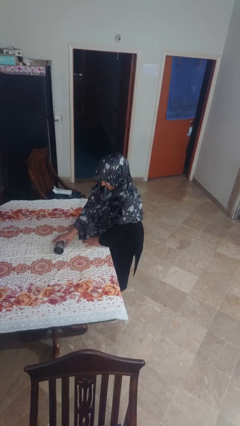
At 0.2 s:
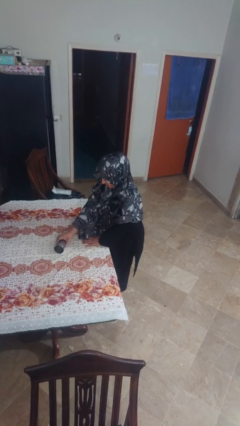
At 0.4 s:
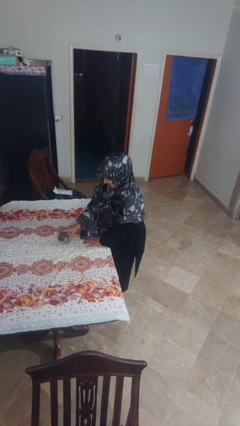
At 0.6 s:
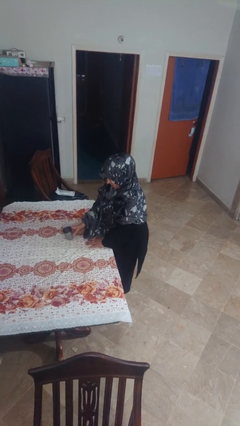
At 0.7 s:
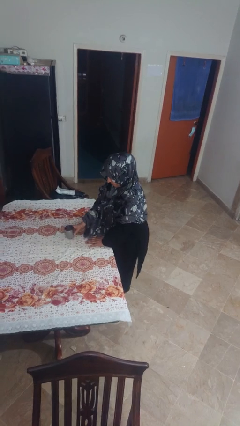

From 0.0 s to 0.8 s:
person sets upright glass

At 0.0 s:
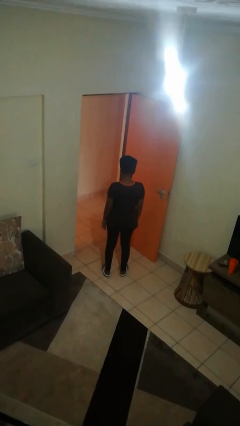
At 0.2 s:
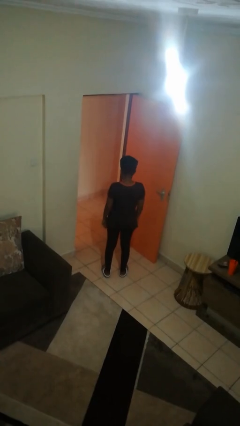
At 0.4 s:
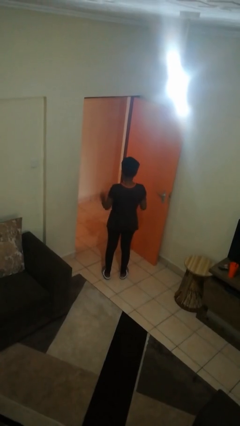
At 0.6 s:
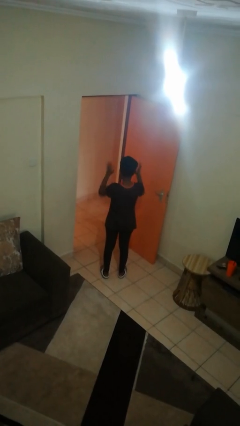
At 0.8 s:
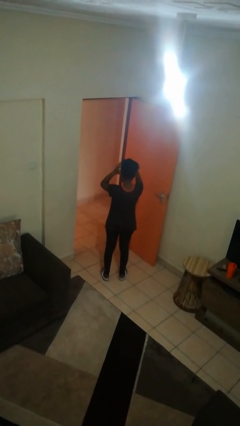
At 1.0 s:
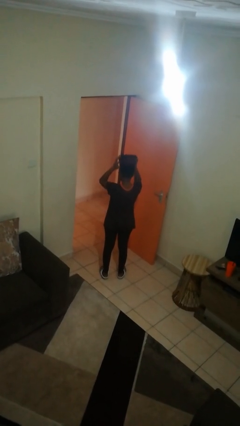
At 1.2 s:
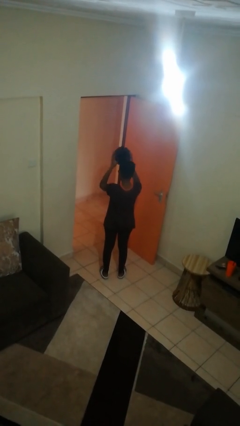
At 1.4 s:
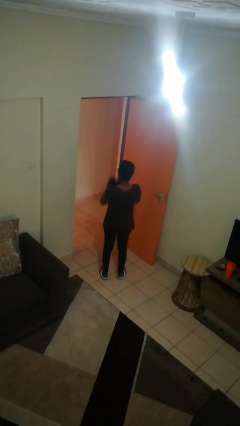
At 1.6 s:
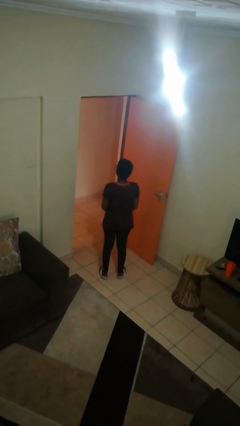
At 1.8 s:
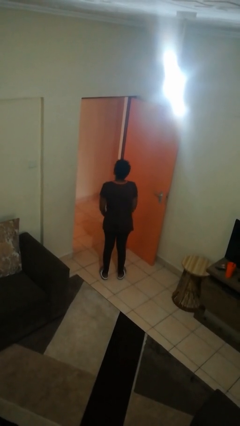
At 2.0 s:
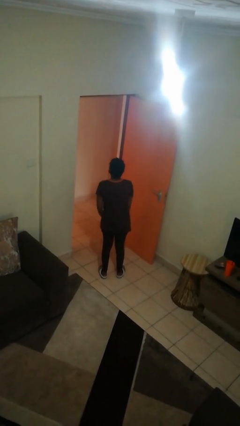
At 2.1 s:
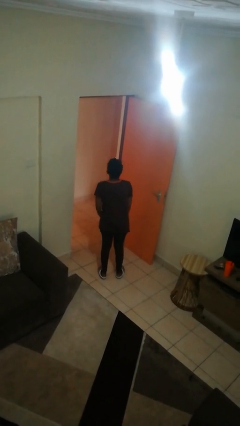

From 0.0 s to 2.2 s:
person takes off hat

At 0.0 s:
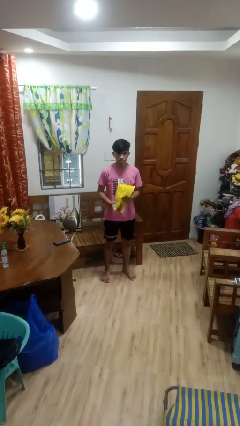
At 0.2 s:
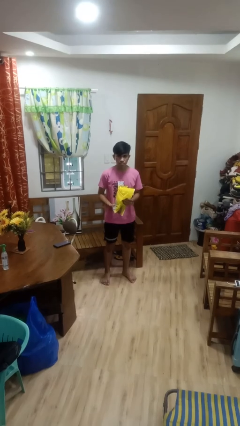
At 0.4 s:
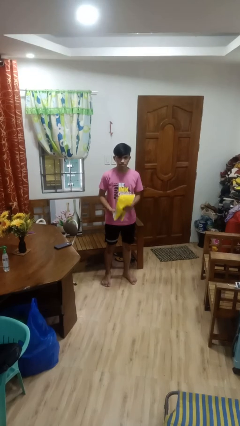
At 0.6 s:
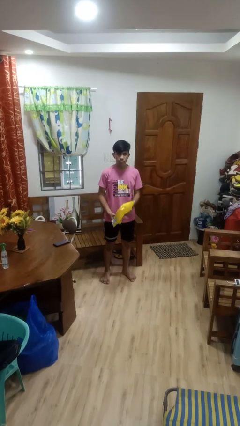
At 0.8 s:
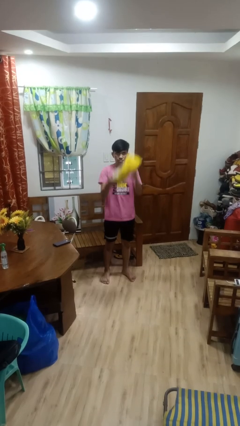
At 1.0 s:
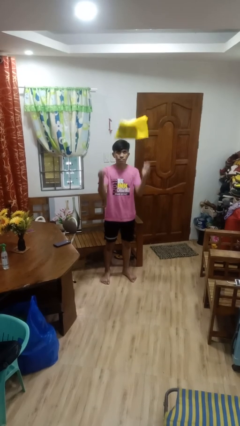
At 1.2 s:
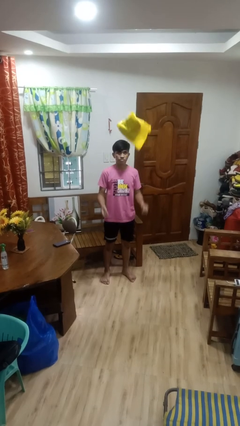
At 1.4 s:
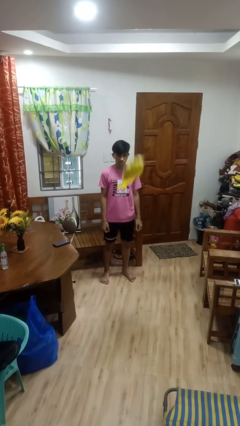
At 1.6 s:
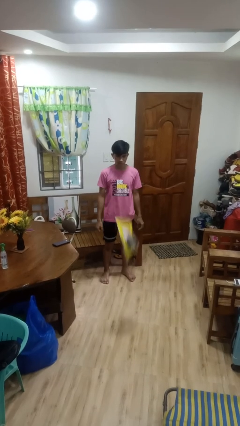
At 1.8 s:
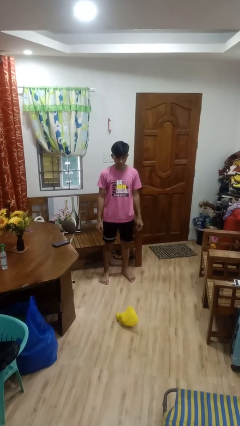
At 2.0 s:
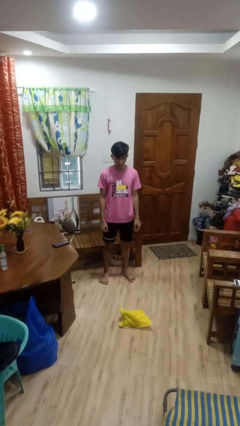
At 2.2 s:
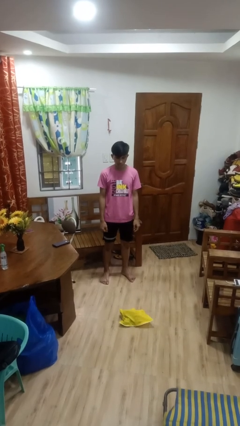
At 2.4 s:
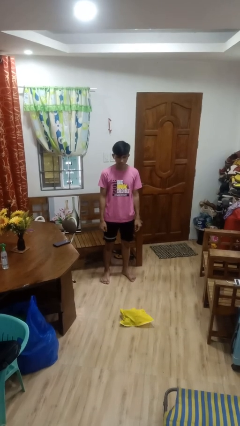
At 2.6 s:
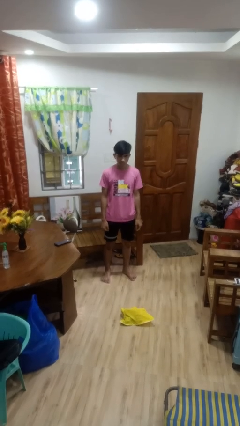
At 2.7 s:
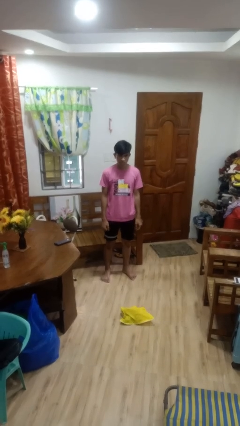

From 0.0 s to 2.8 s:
person throws object into air

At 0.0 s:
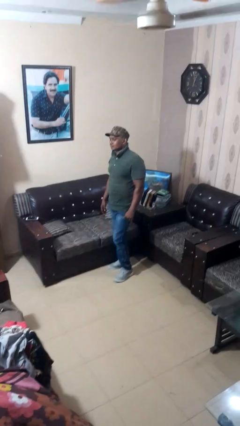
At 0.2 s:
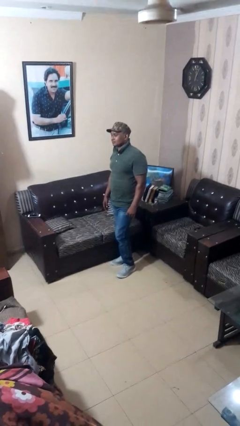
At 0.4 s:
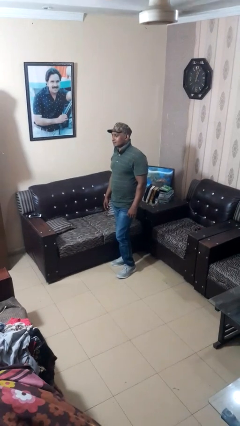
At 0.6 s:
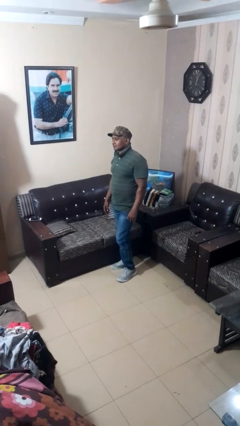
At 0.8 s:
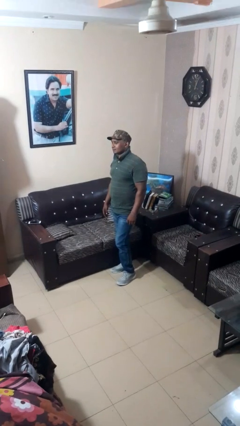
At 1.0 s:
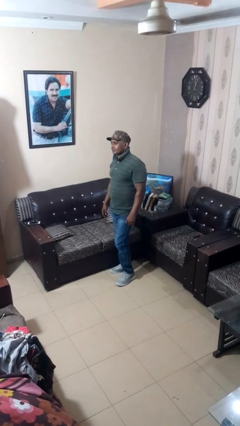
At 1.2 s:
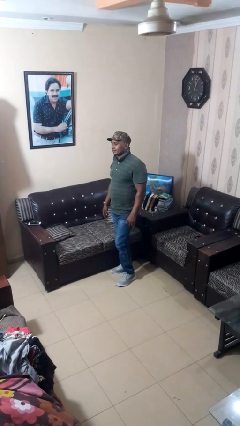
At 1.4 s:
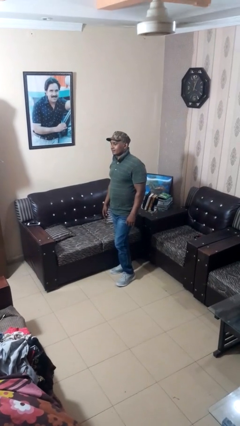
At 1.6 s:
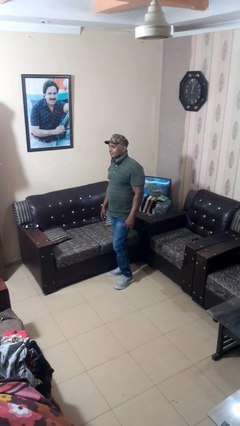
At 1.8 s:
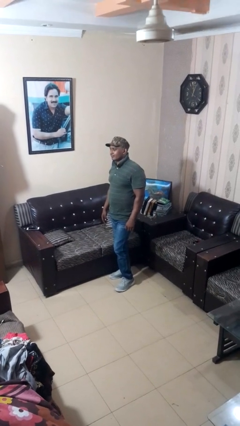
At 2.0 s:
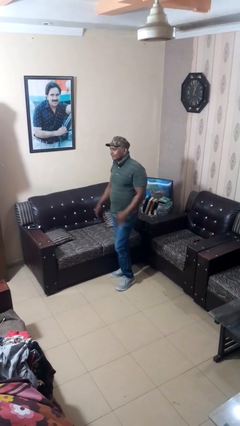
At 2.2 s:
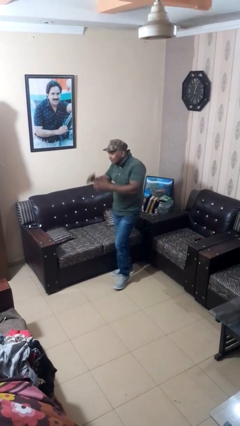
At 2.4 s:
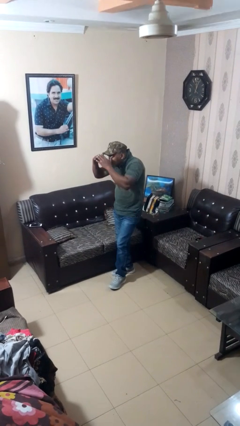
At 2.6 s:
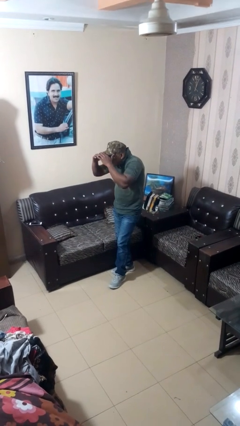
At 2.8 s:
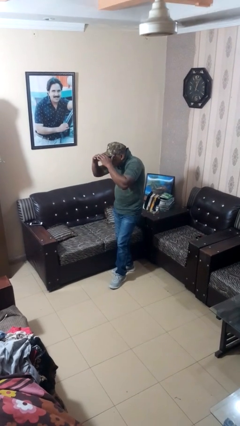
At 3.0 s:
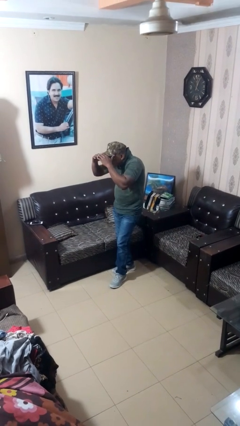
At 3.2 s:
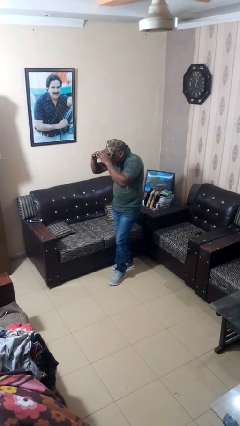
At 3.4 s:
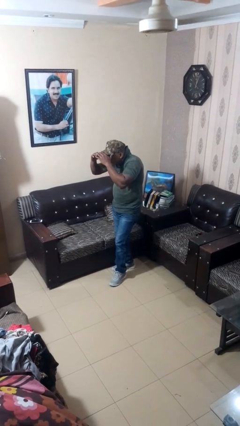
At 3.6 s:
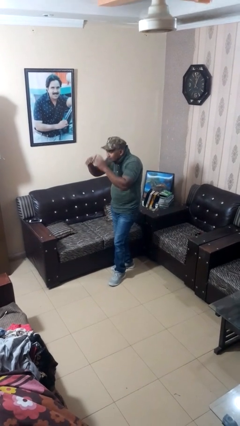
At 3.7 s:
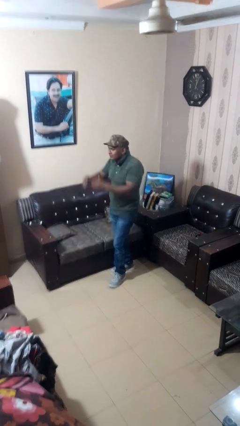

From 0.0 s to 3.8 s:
person shades eyes

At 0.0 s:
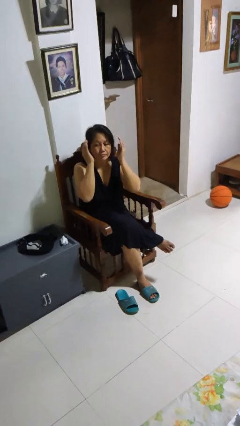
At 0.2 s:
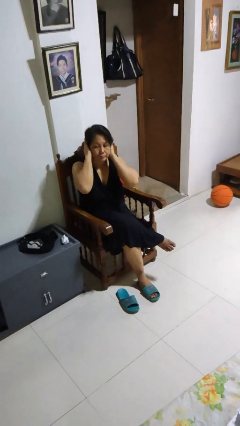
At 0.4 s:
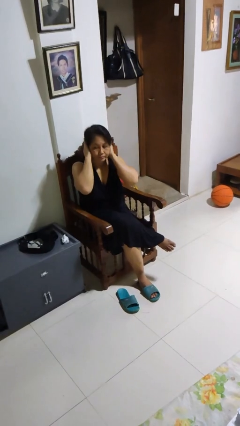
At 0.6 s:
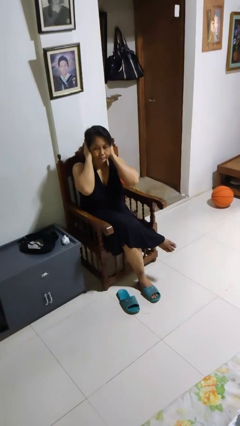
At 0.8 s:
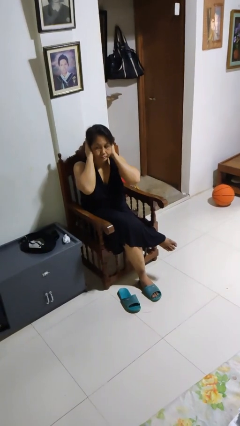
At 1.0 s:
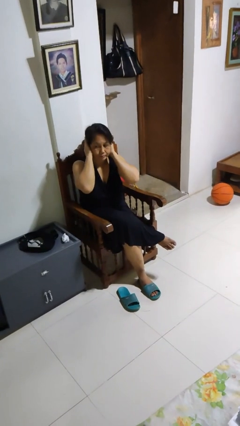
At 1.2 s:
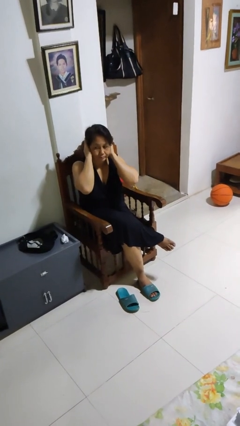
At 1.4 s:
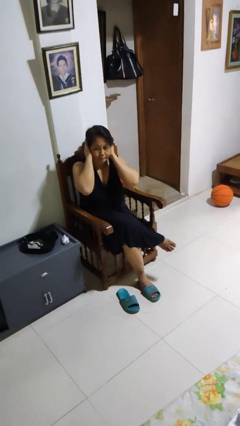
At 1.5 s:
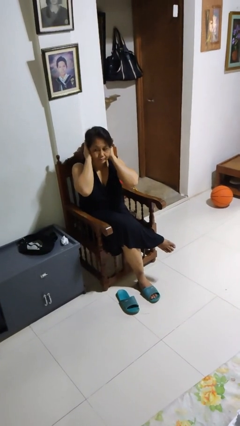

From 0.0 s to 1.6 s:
person puts fingers in ear

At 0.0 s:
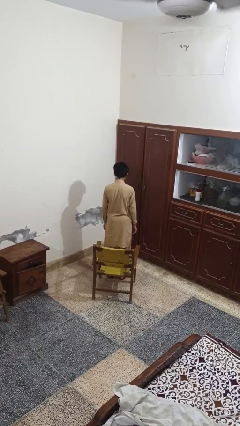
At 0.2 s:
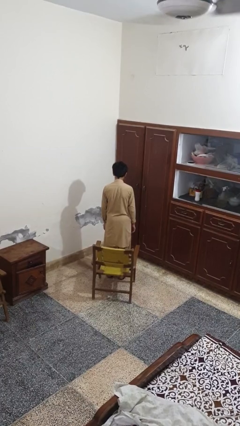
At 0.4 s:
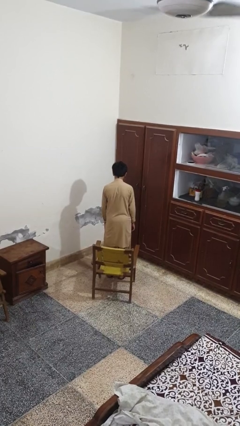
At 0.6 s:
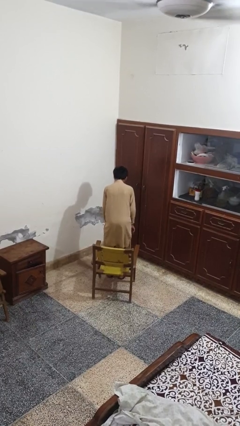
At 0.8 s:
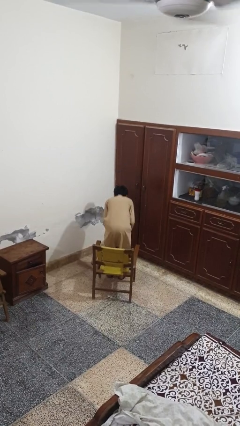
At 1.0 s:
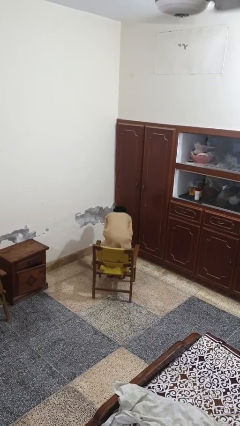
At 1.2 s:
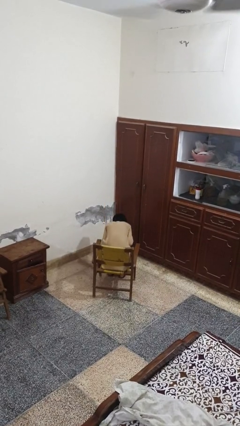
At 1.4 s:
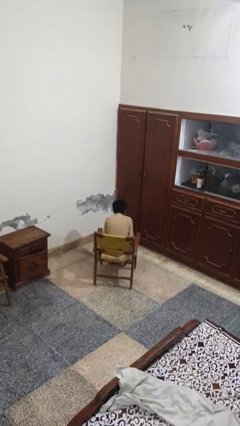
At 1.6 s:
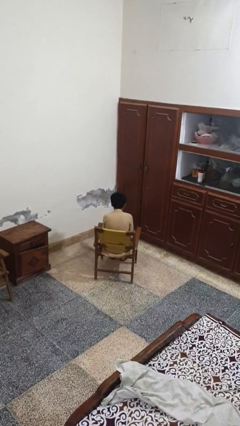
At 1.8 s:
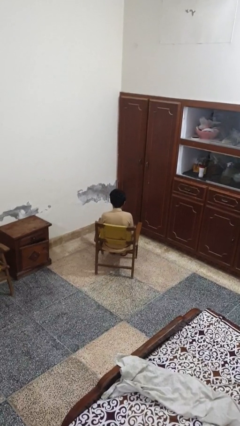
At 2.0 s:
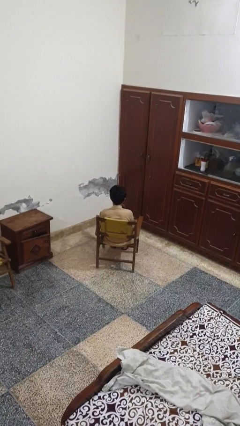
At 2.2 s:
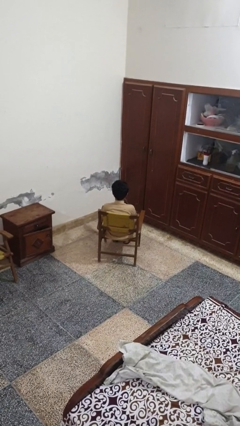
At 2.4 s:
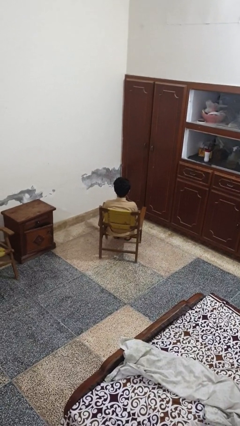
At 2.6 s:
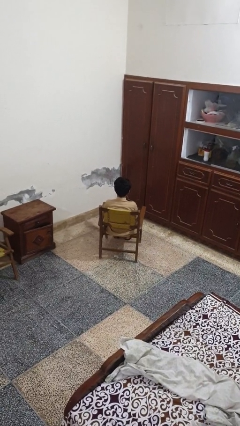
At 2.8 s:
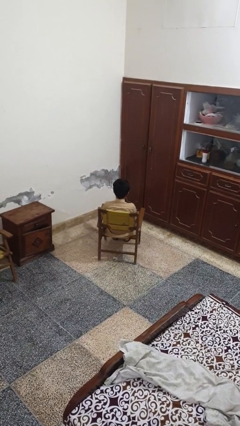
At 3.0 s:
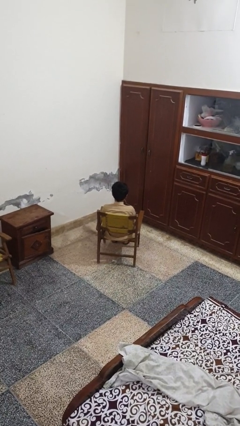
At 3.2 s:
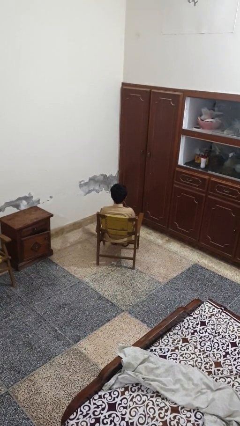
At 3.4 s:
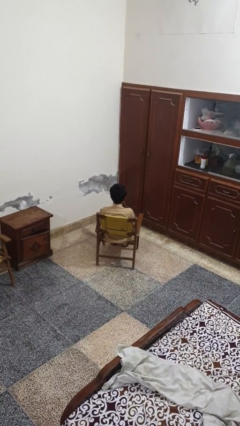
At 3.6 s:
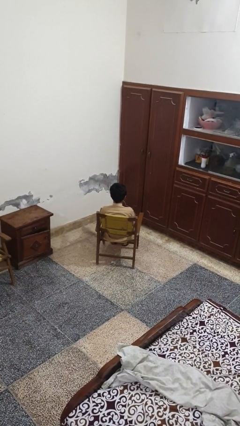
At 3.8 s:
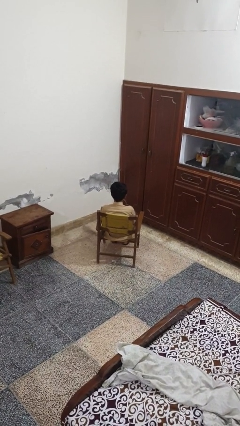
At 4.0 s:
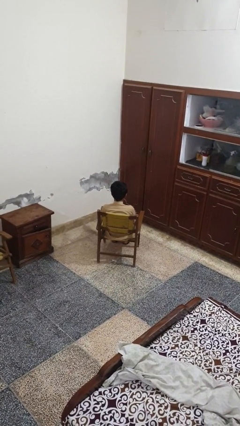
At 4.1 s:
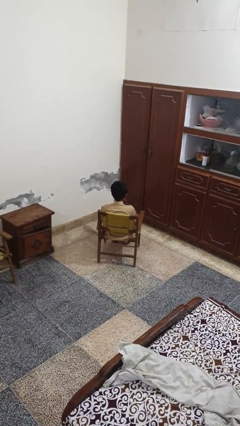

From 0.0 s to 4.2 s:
person sits down

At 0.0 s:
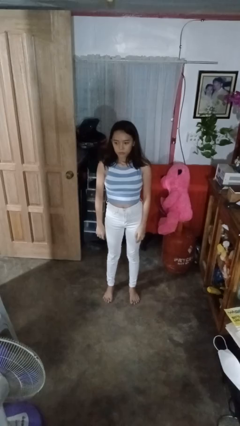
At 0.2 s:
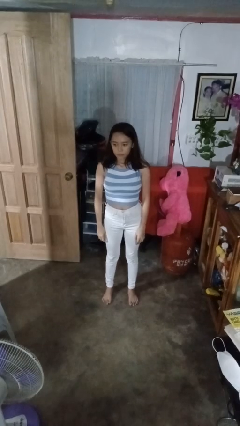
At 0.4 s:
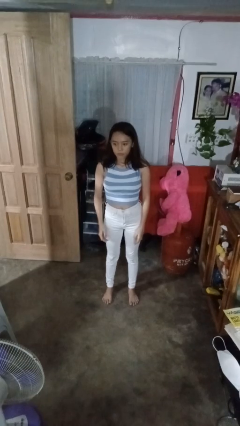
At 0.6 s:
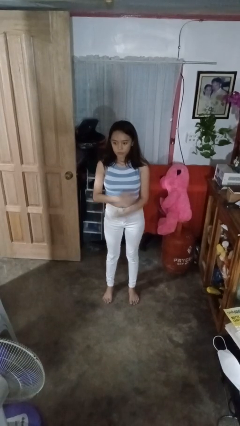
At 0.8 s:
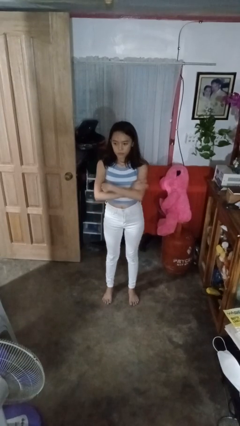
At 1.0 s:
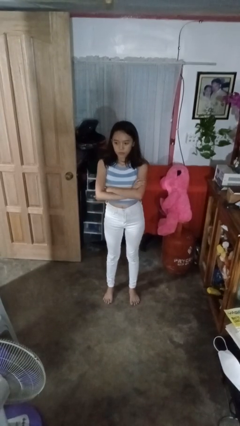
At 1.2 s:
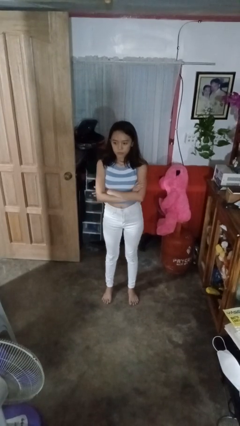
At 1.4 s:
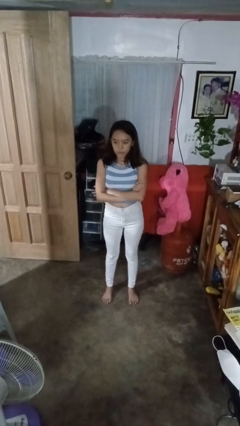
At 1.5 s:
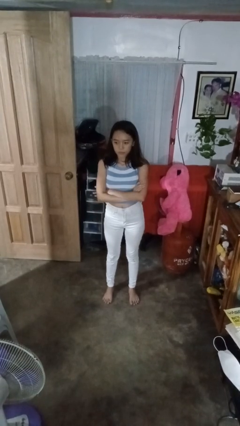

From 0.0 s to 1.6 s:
person crosses arms
